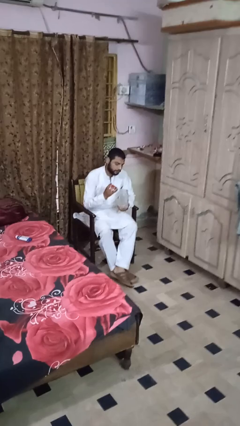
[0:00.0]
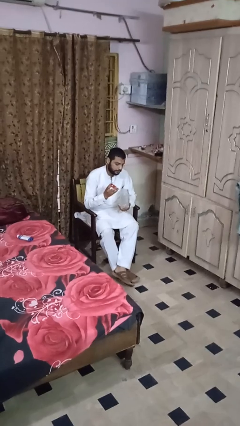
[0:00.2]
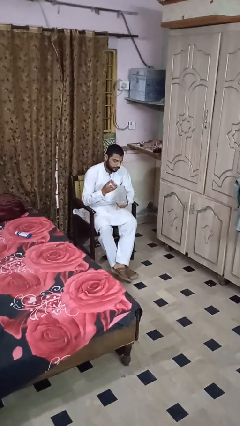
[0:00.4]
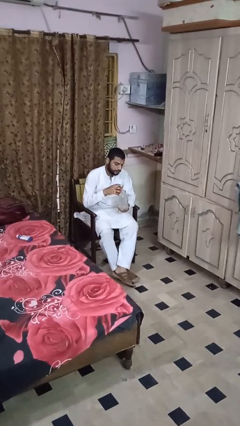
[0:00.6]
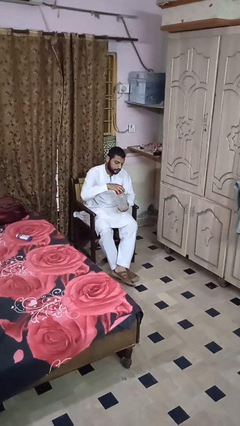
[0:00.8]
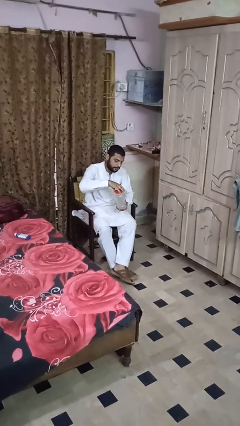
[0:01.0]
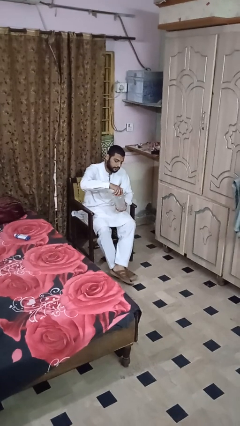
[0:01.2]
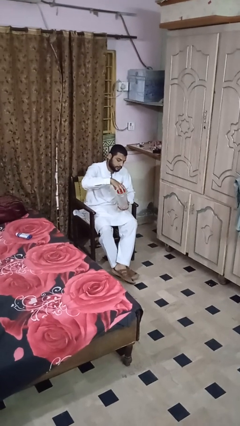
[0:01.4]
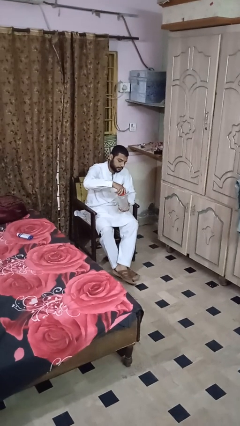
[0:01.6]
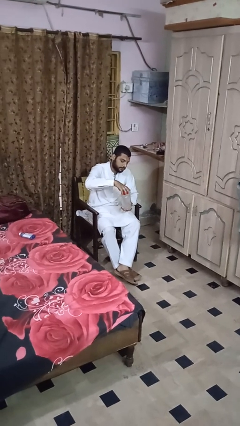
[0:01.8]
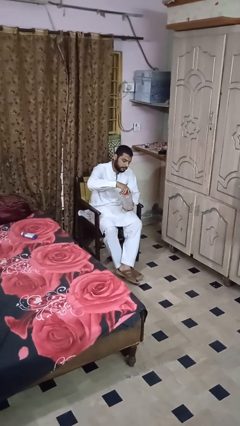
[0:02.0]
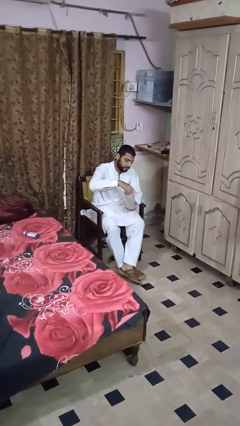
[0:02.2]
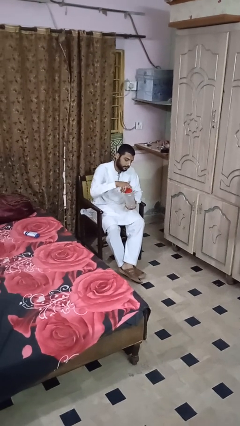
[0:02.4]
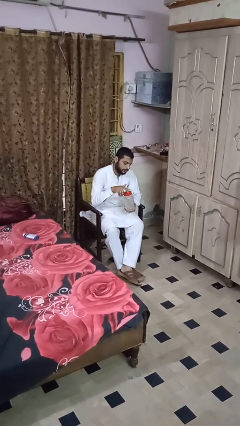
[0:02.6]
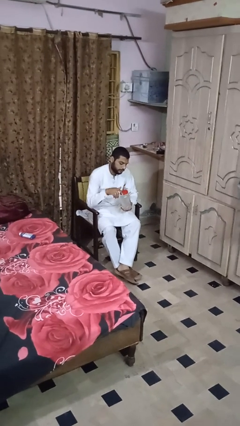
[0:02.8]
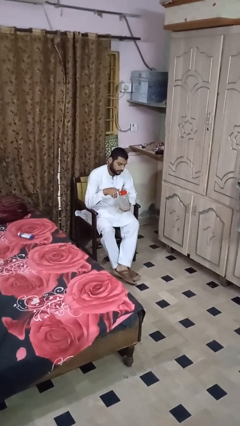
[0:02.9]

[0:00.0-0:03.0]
person closes jar

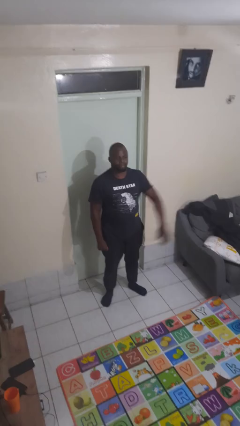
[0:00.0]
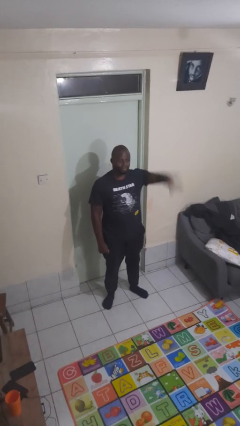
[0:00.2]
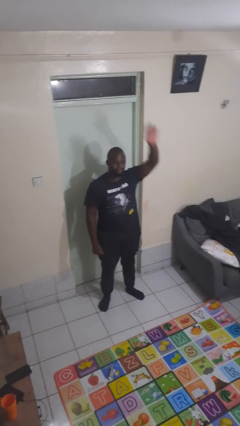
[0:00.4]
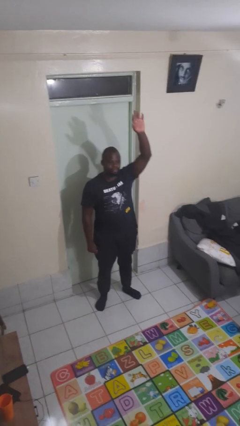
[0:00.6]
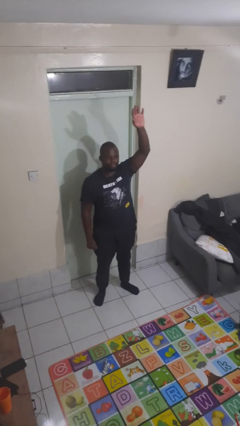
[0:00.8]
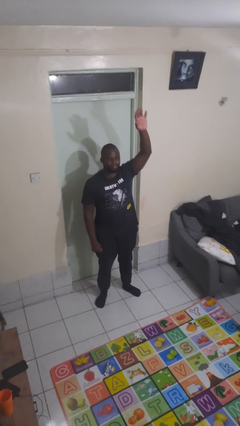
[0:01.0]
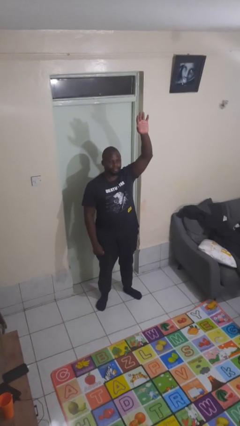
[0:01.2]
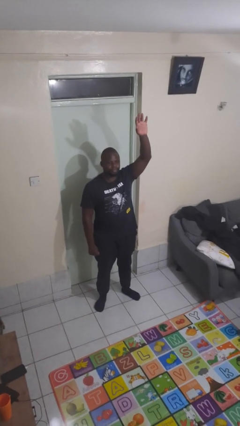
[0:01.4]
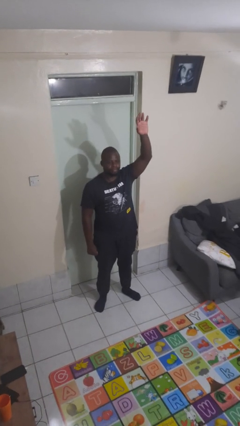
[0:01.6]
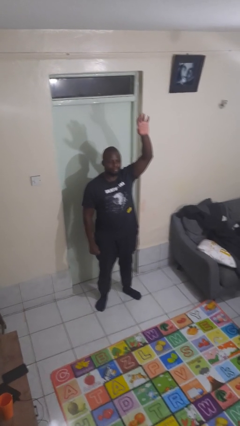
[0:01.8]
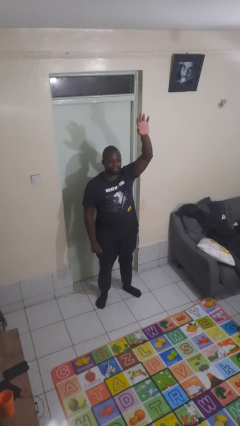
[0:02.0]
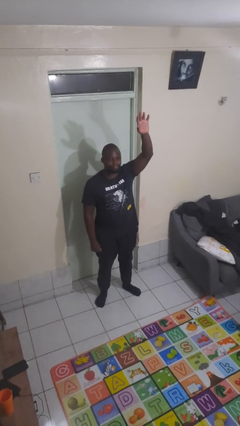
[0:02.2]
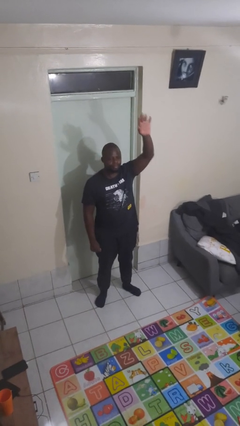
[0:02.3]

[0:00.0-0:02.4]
person gestures raise hand

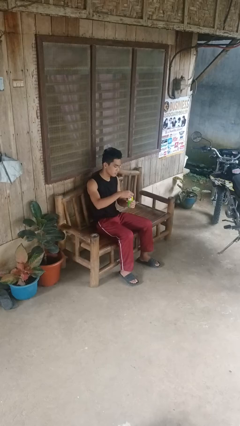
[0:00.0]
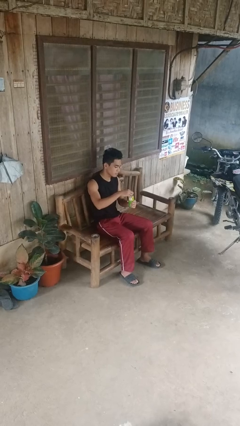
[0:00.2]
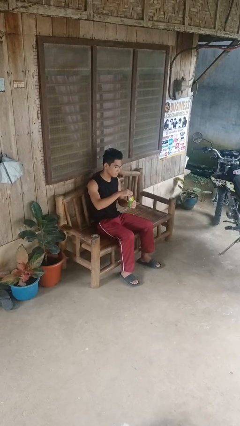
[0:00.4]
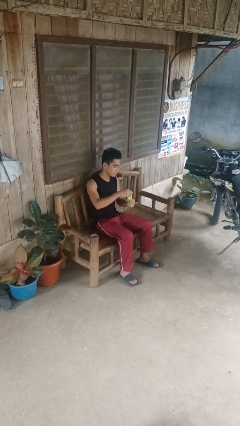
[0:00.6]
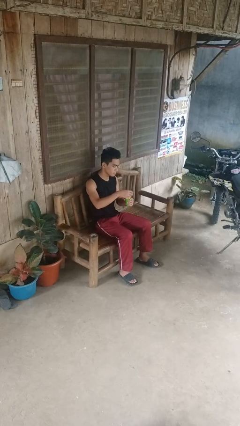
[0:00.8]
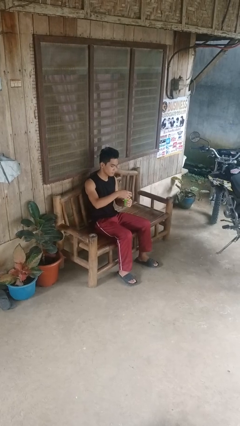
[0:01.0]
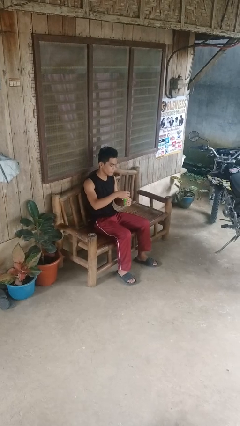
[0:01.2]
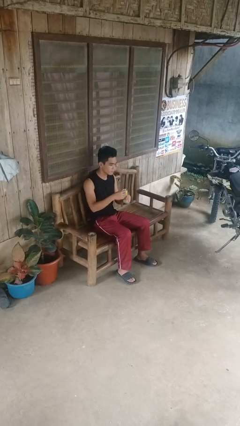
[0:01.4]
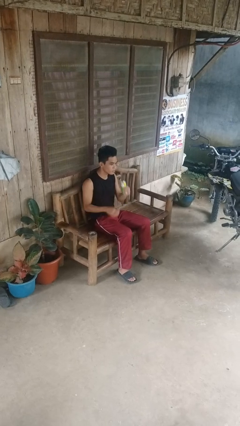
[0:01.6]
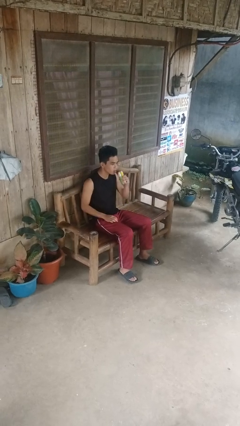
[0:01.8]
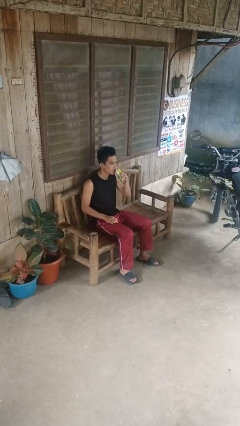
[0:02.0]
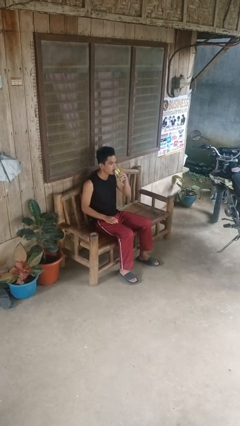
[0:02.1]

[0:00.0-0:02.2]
person opens beverage can

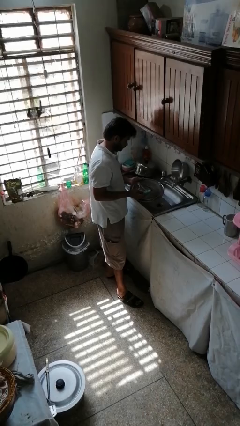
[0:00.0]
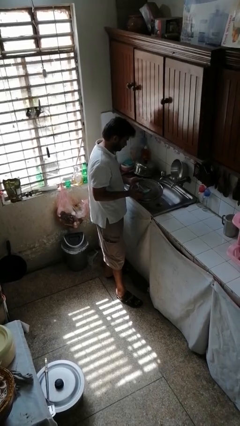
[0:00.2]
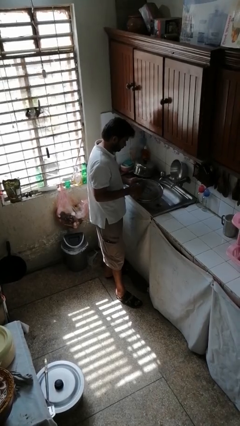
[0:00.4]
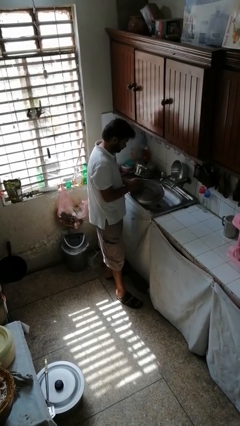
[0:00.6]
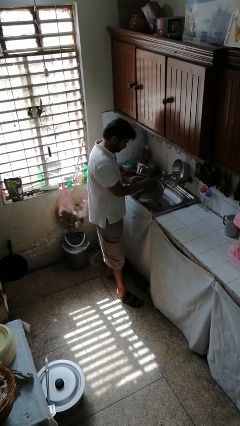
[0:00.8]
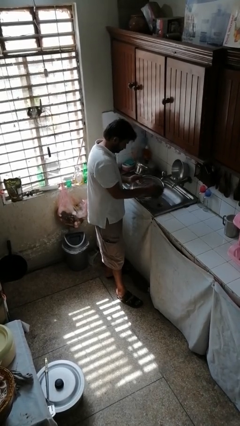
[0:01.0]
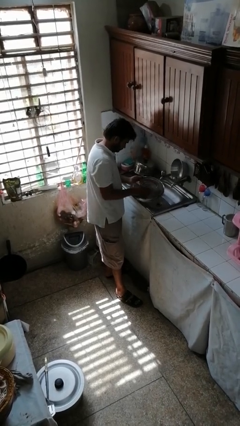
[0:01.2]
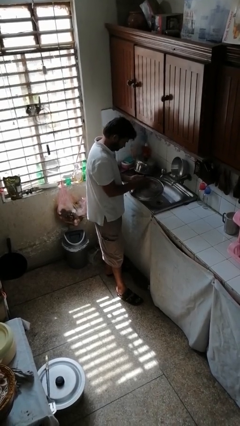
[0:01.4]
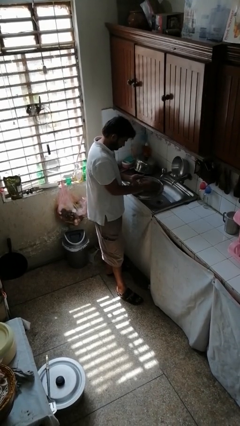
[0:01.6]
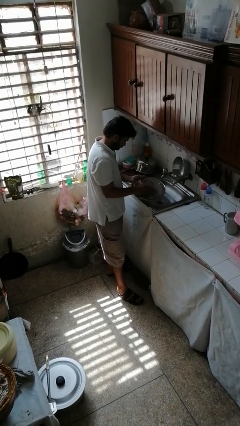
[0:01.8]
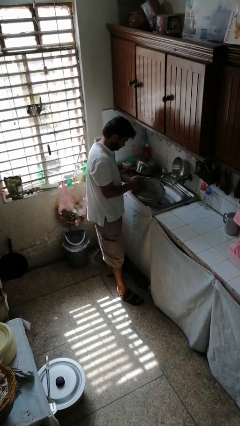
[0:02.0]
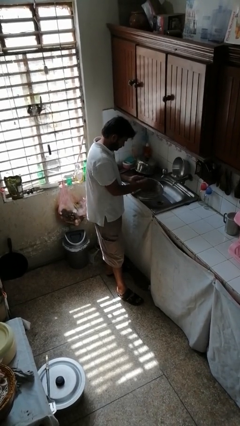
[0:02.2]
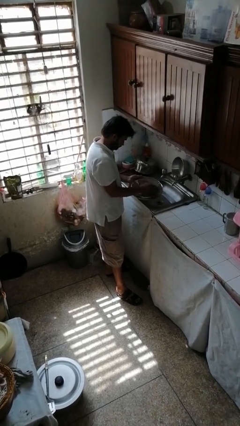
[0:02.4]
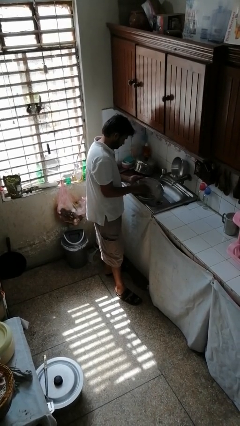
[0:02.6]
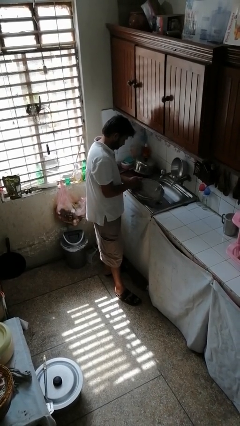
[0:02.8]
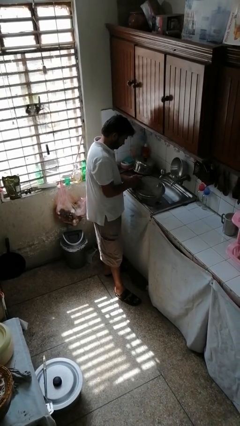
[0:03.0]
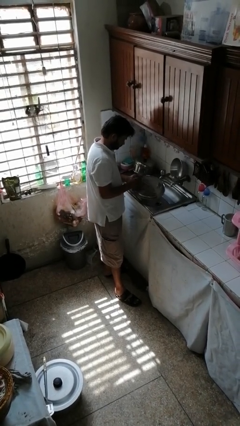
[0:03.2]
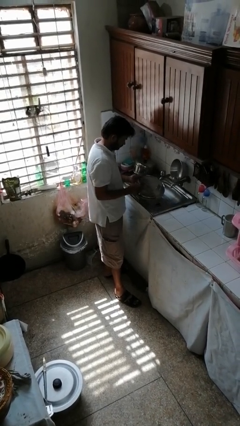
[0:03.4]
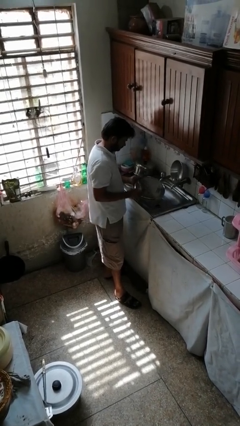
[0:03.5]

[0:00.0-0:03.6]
person washes dish

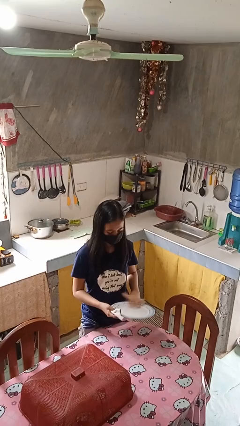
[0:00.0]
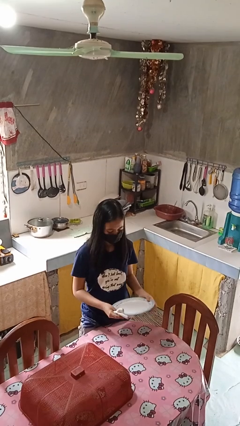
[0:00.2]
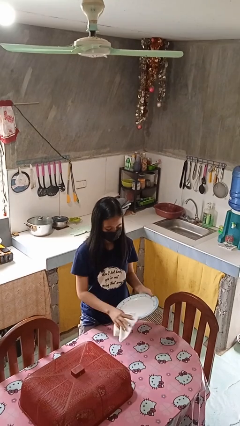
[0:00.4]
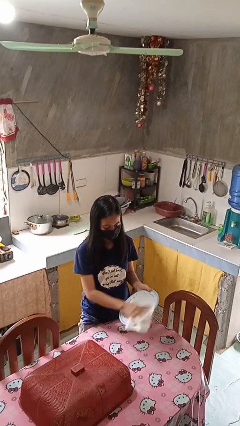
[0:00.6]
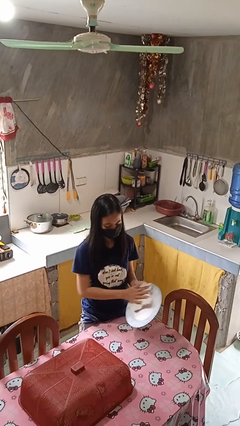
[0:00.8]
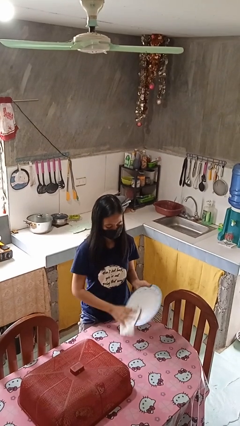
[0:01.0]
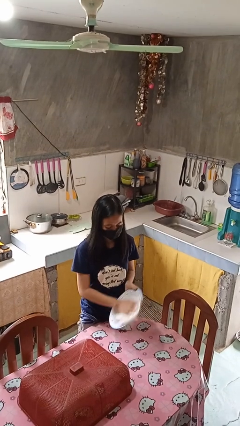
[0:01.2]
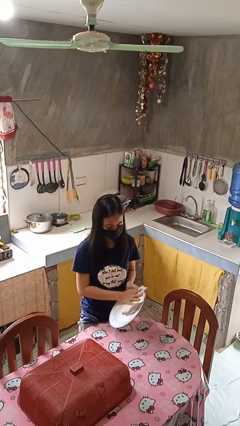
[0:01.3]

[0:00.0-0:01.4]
person dries dish

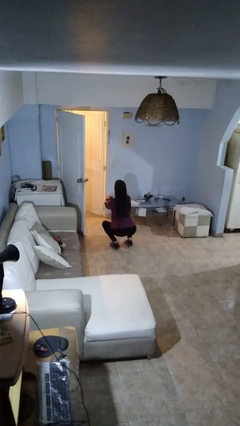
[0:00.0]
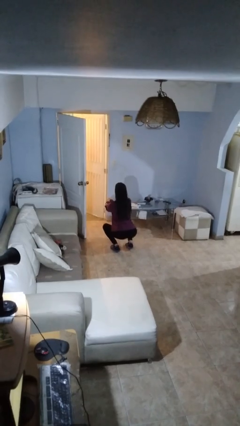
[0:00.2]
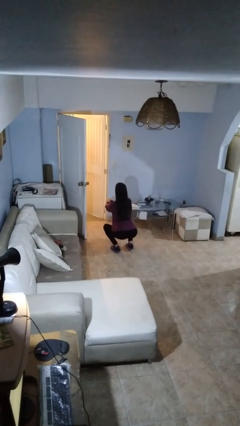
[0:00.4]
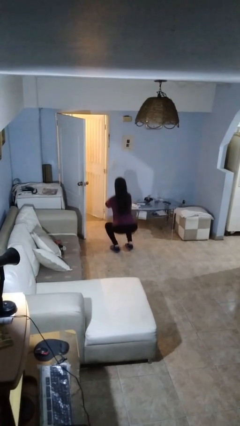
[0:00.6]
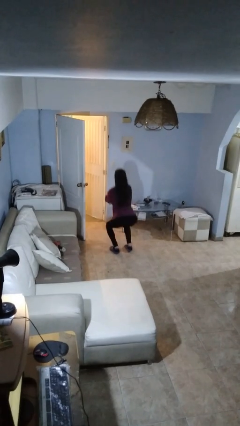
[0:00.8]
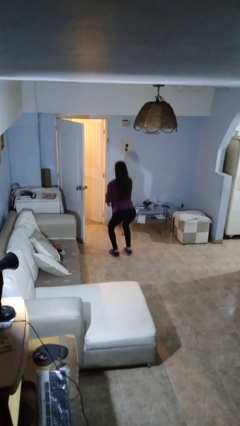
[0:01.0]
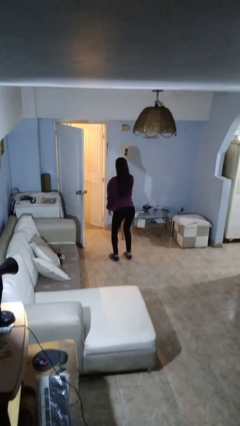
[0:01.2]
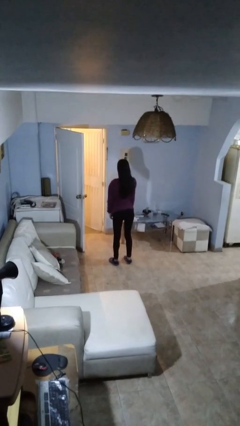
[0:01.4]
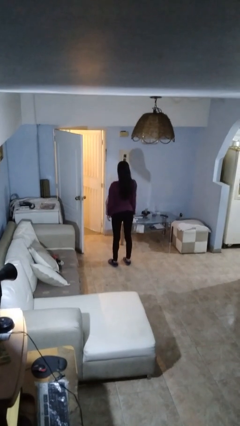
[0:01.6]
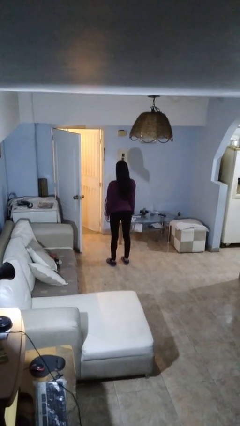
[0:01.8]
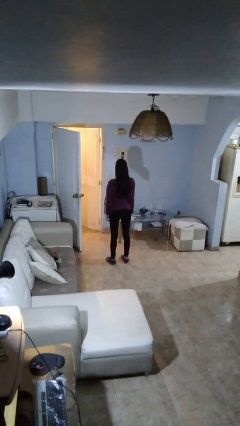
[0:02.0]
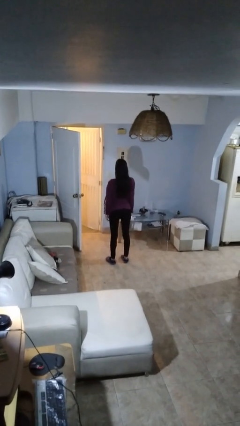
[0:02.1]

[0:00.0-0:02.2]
person stands up

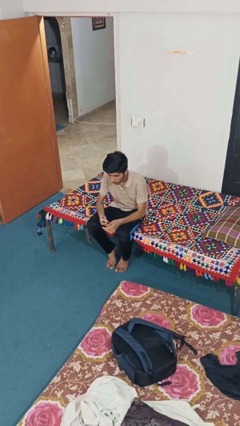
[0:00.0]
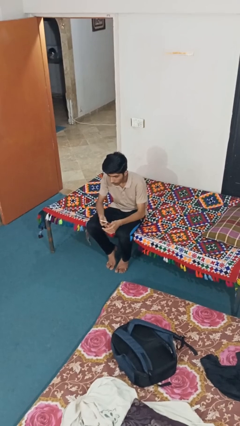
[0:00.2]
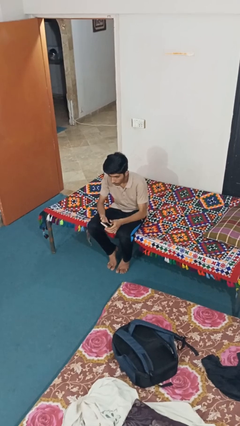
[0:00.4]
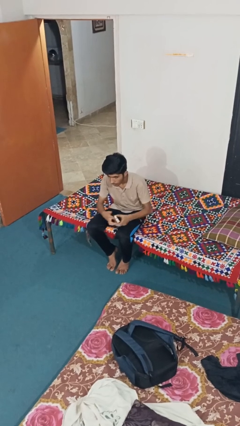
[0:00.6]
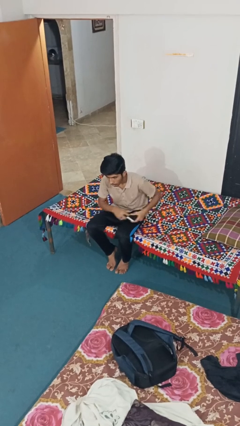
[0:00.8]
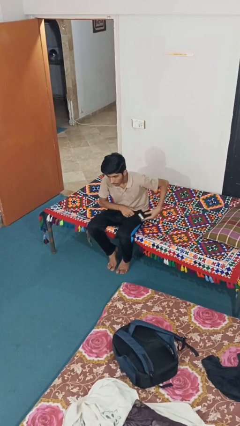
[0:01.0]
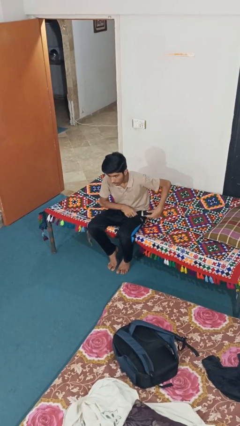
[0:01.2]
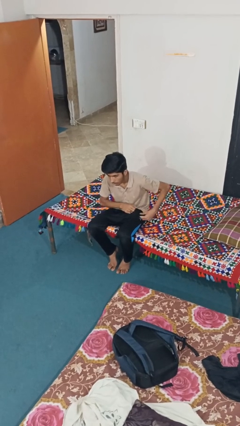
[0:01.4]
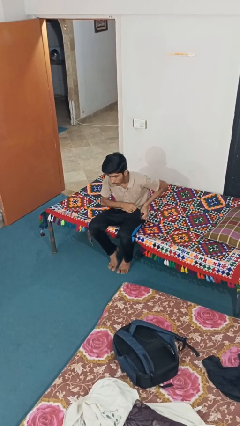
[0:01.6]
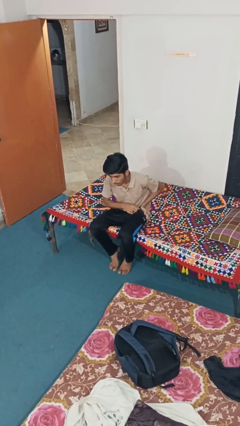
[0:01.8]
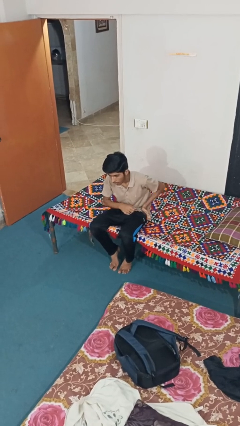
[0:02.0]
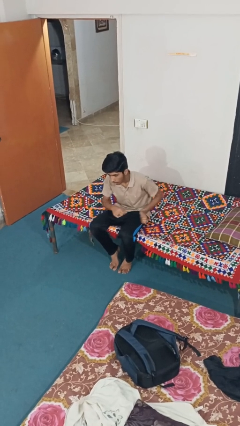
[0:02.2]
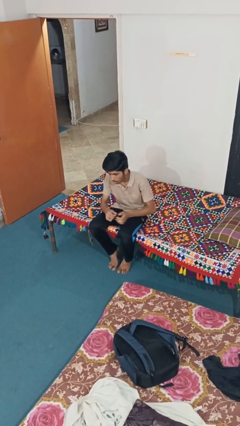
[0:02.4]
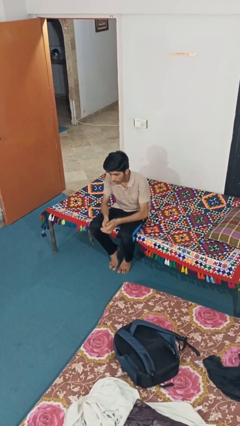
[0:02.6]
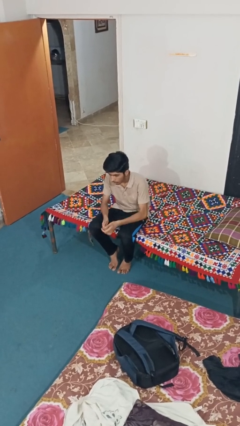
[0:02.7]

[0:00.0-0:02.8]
person puts phone into pocket
